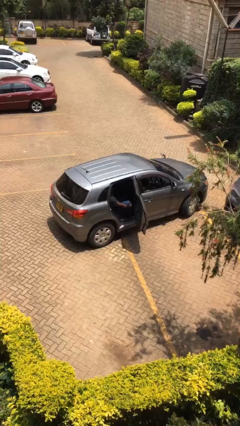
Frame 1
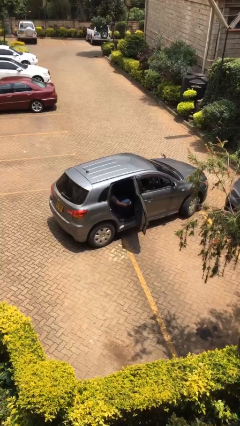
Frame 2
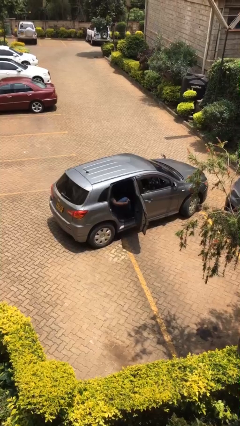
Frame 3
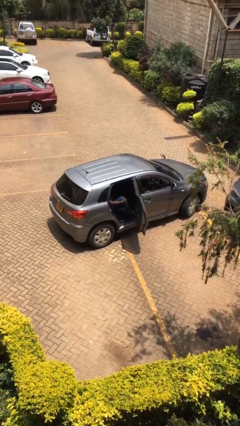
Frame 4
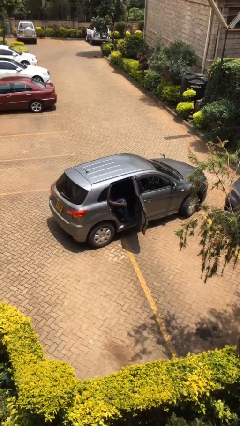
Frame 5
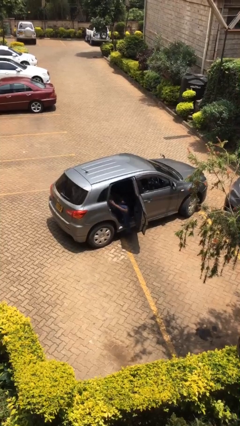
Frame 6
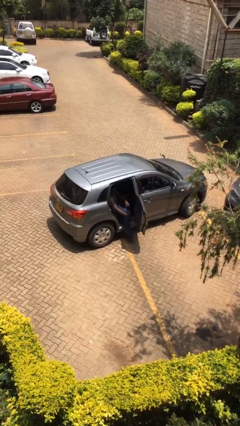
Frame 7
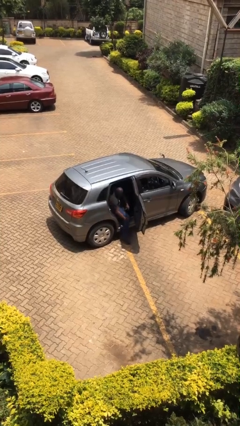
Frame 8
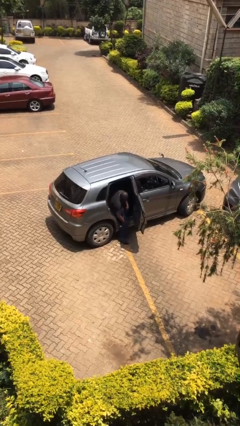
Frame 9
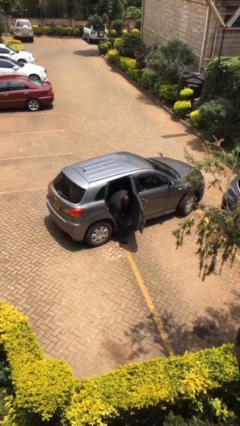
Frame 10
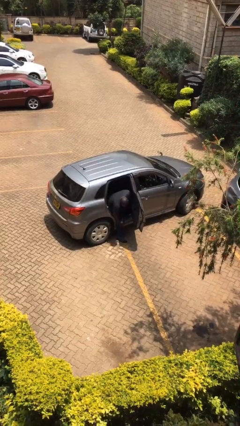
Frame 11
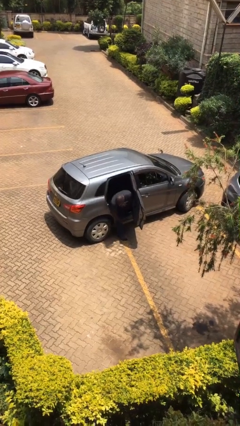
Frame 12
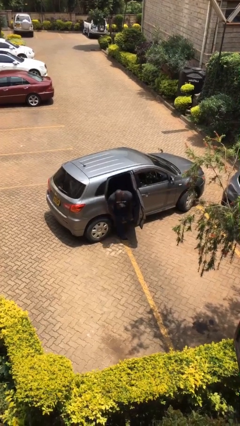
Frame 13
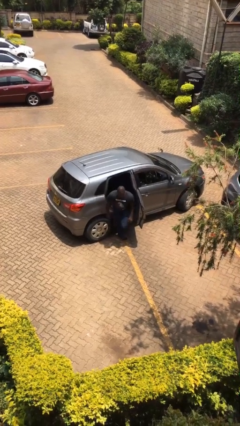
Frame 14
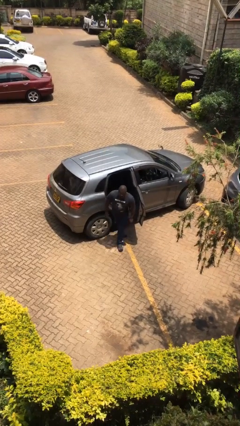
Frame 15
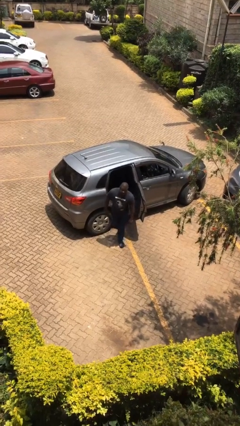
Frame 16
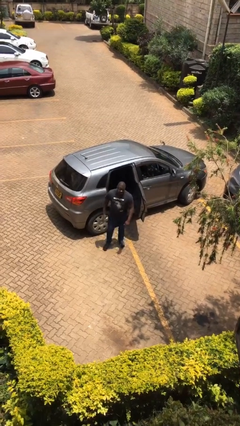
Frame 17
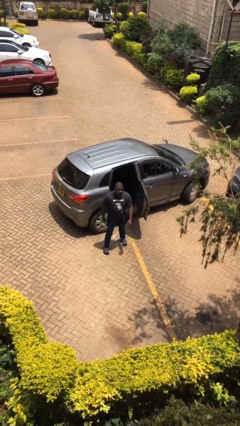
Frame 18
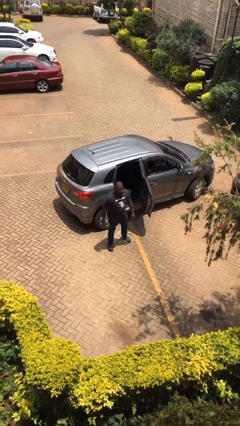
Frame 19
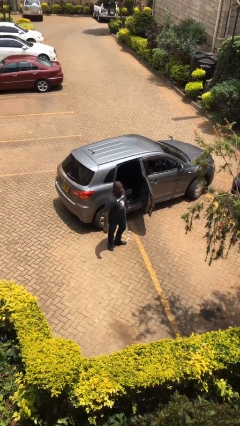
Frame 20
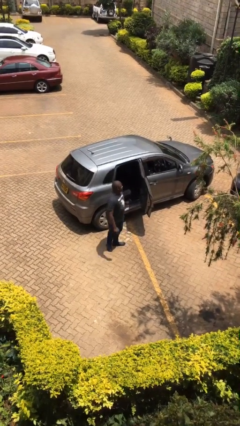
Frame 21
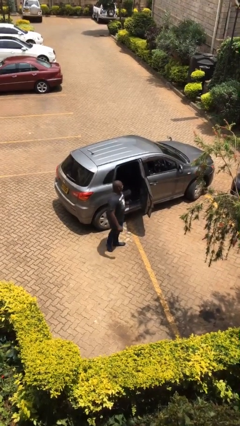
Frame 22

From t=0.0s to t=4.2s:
person exits car

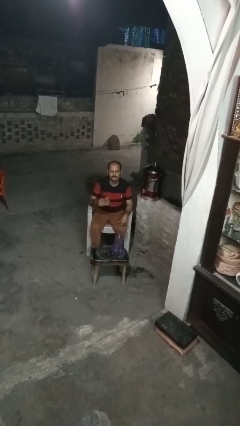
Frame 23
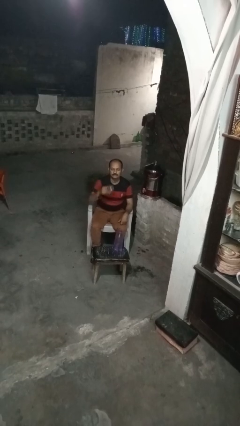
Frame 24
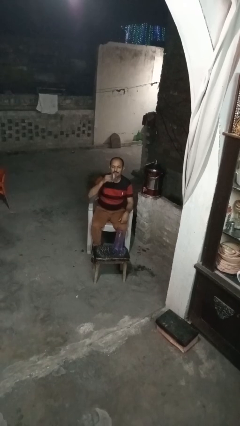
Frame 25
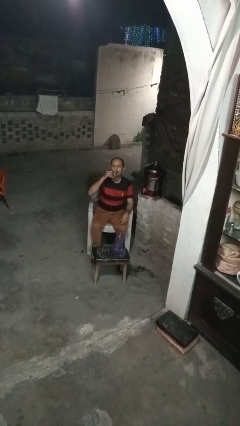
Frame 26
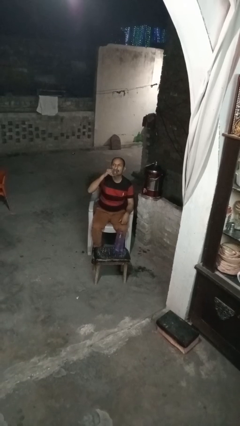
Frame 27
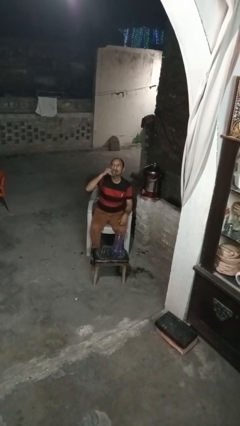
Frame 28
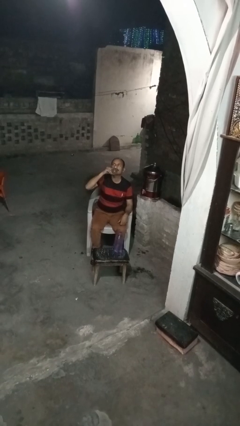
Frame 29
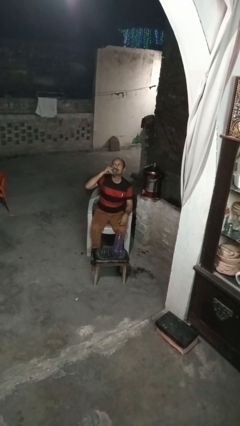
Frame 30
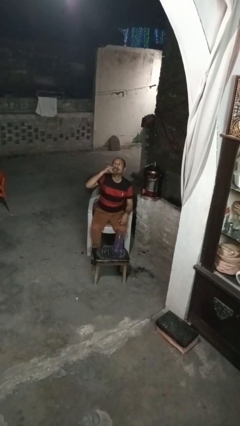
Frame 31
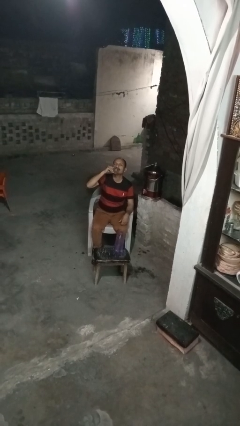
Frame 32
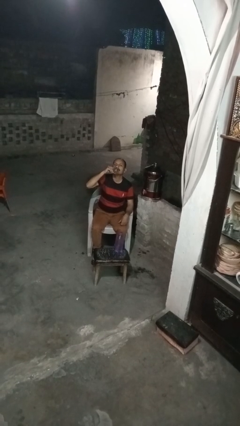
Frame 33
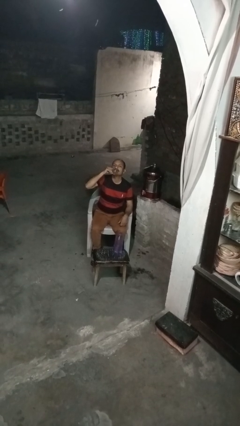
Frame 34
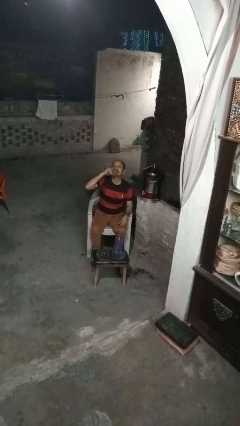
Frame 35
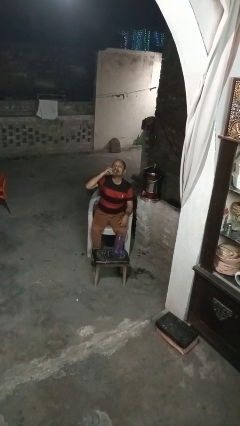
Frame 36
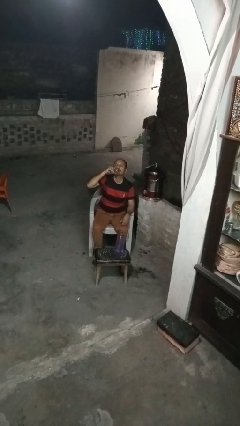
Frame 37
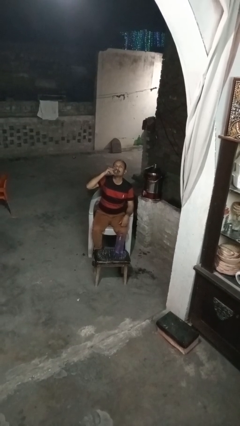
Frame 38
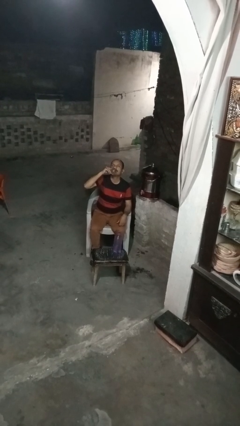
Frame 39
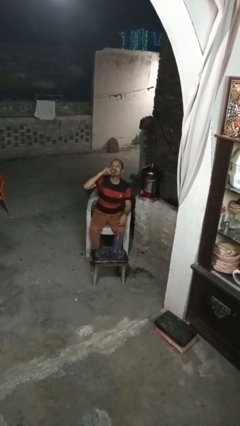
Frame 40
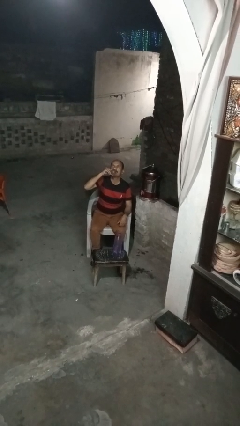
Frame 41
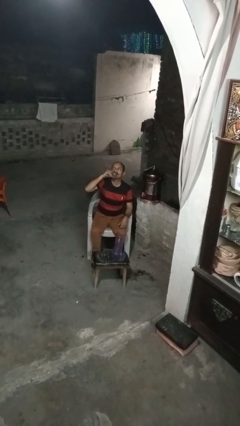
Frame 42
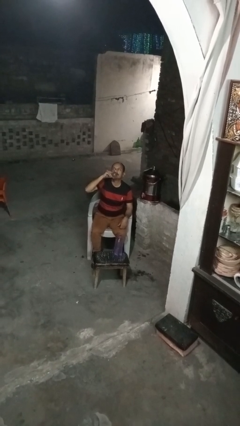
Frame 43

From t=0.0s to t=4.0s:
person drinks from shotglass

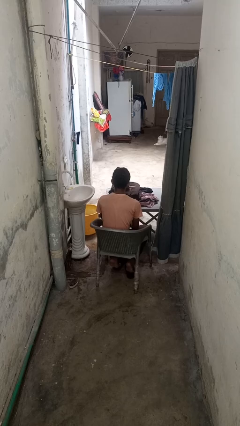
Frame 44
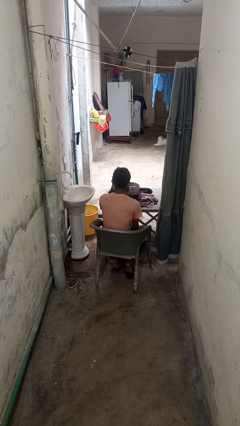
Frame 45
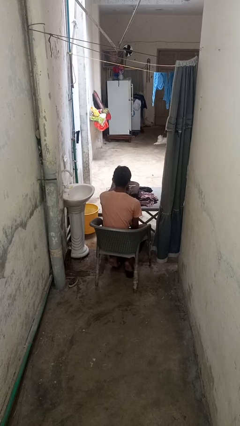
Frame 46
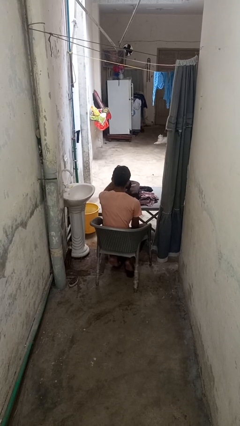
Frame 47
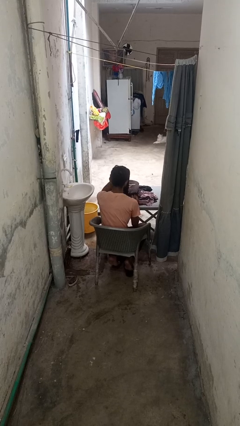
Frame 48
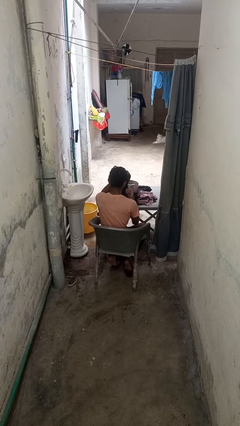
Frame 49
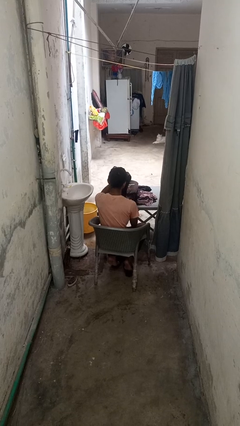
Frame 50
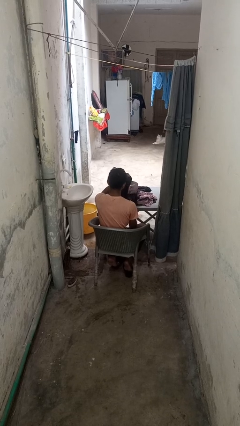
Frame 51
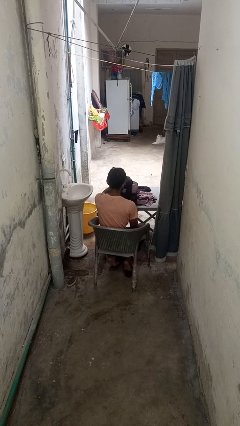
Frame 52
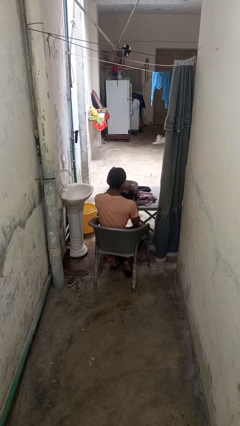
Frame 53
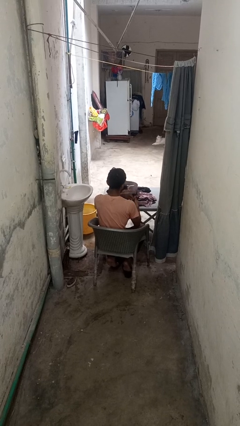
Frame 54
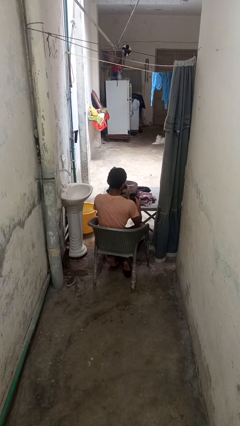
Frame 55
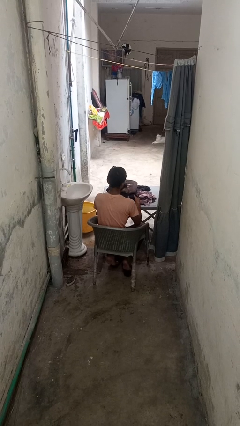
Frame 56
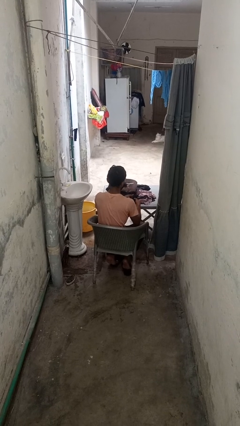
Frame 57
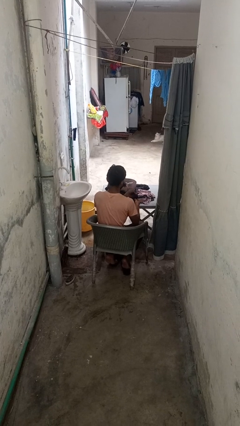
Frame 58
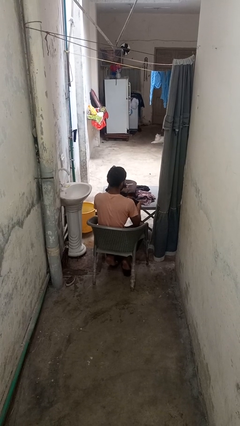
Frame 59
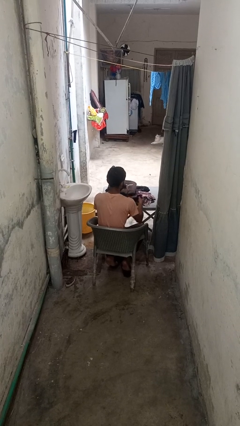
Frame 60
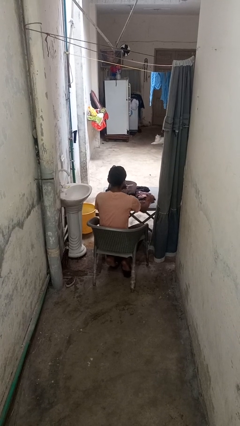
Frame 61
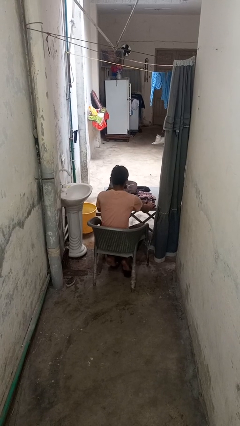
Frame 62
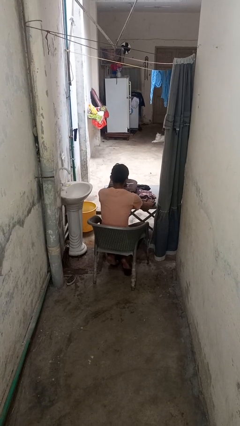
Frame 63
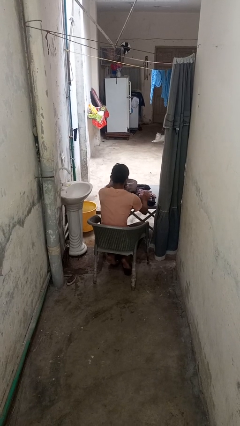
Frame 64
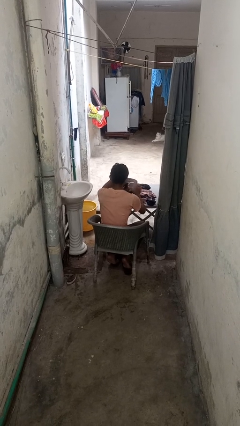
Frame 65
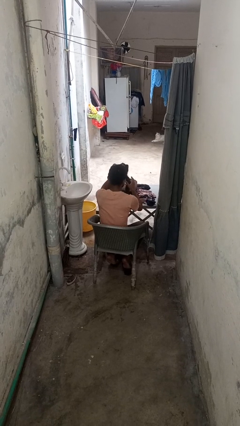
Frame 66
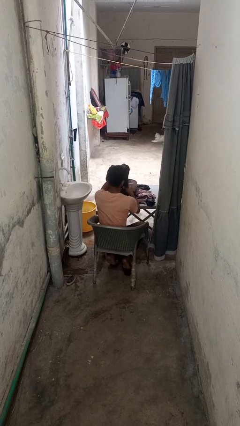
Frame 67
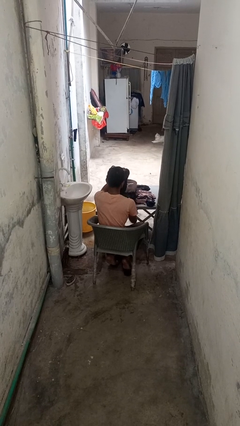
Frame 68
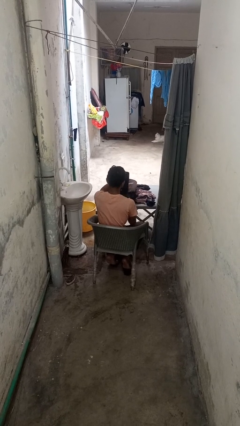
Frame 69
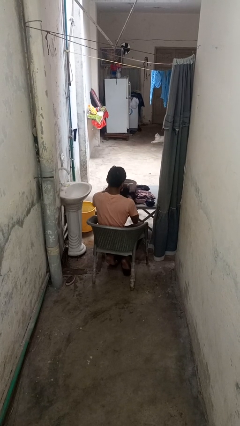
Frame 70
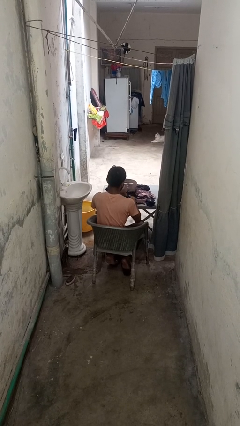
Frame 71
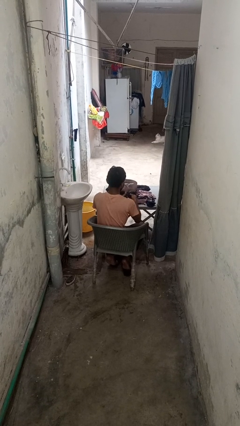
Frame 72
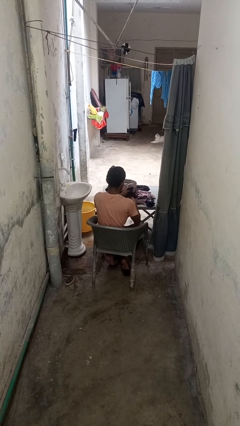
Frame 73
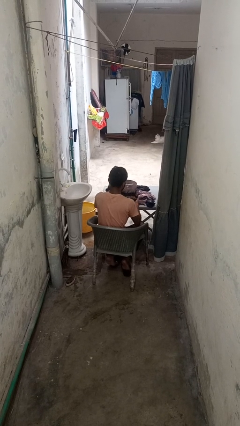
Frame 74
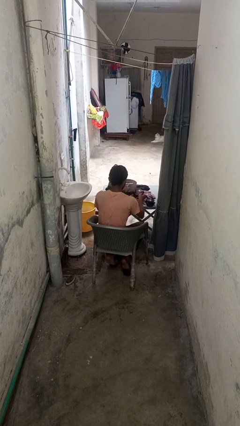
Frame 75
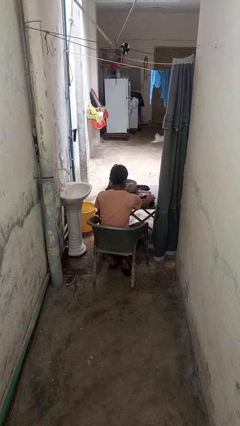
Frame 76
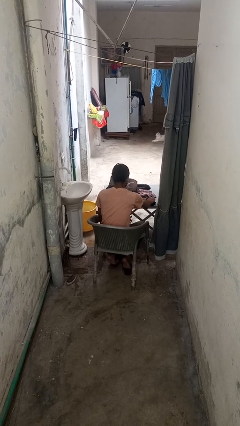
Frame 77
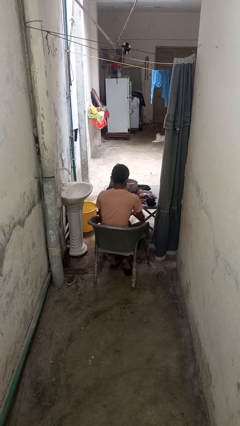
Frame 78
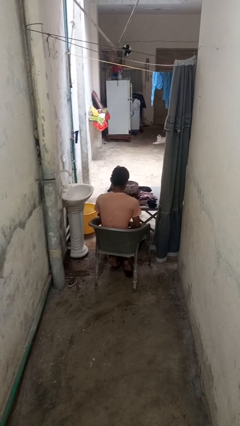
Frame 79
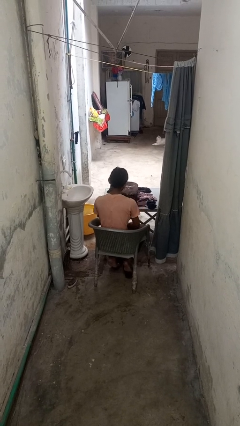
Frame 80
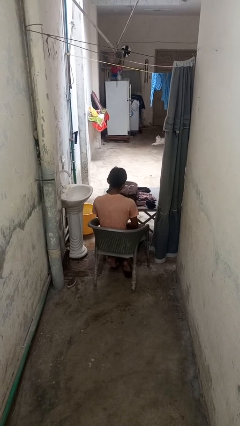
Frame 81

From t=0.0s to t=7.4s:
person folds socks

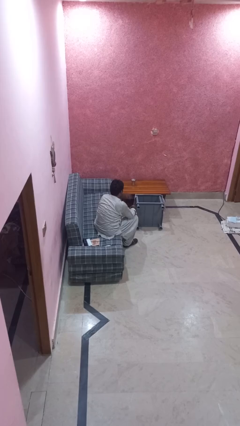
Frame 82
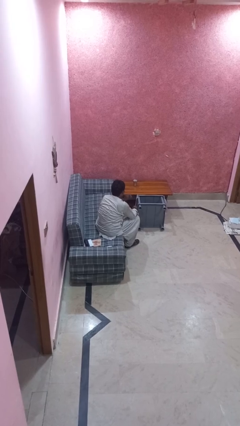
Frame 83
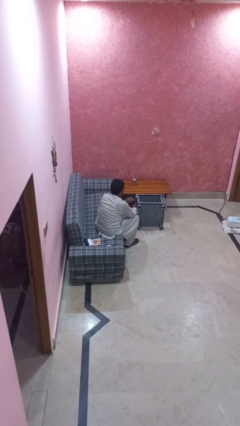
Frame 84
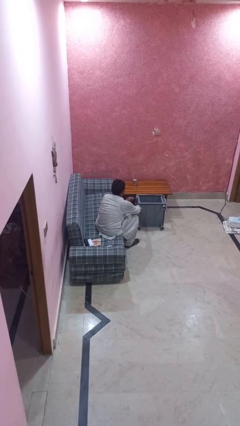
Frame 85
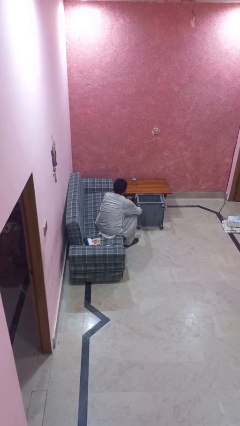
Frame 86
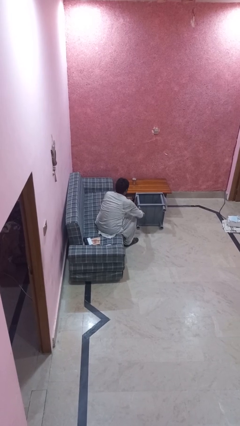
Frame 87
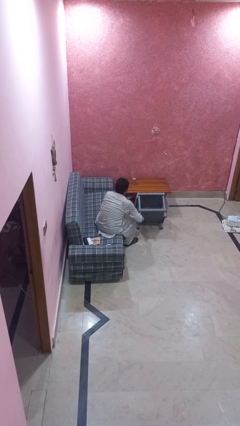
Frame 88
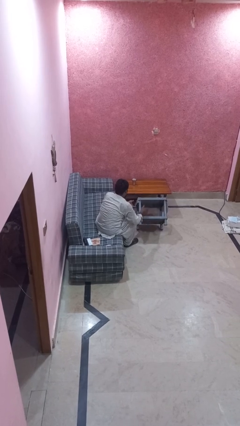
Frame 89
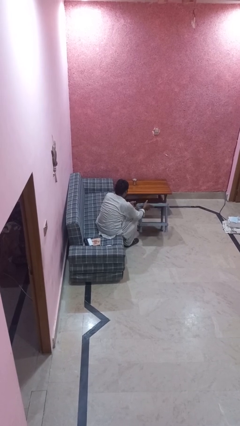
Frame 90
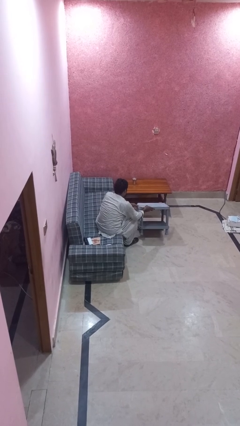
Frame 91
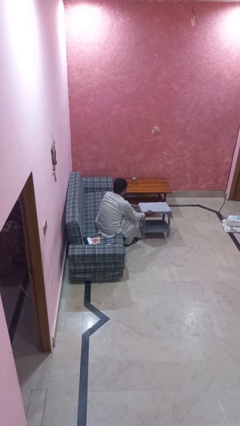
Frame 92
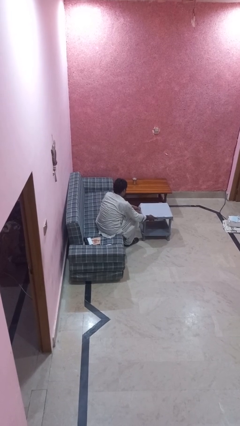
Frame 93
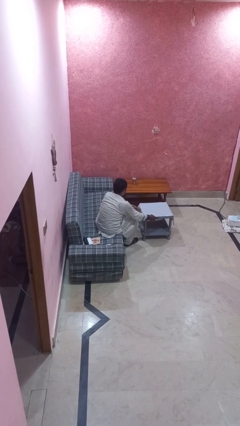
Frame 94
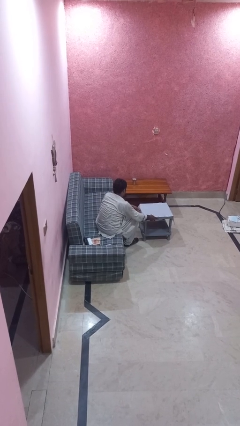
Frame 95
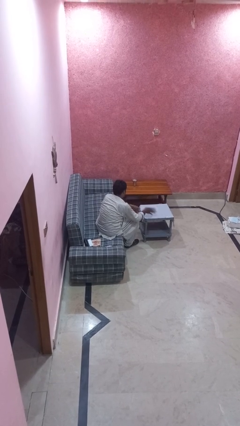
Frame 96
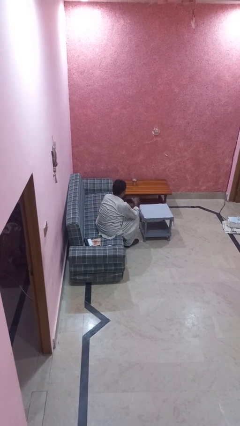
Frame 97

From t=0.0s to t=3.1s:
person sets upright furniture
